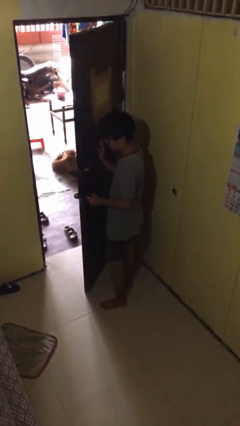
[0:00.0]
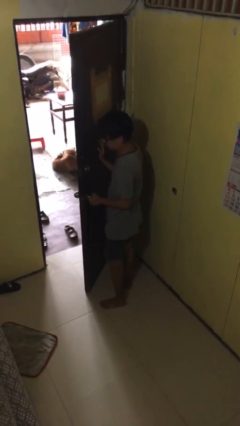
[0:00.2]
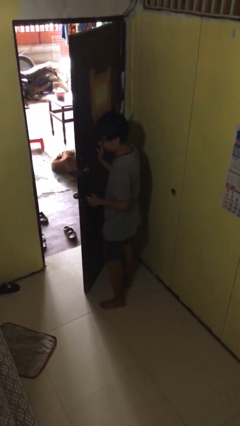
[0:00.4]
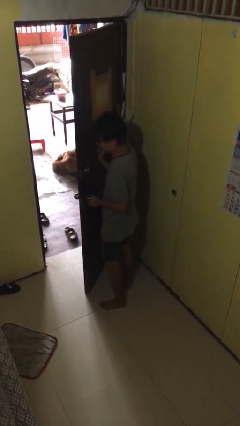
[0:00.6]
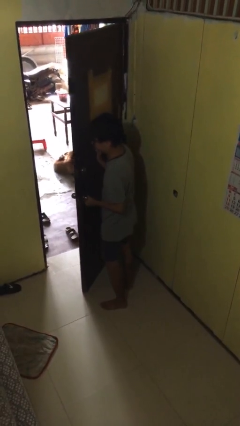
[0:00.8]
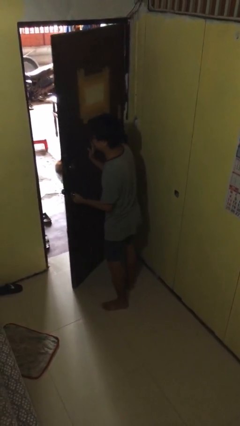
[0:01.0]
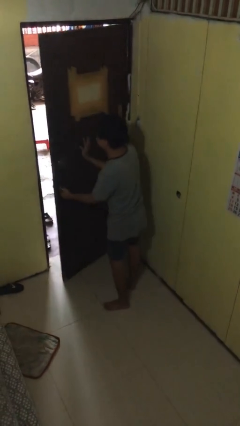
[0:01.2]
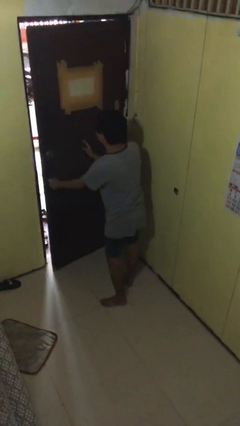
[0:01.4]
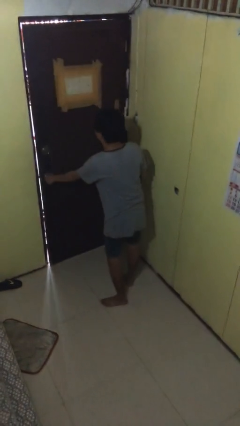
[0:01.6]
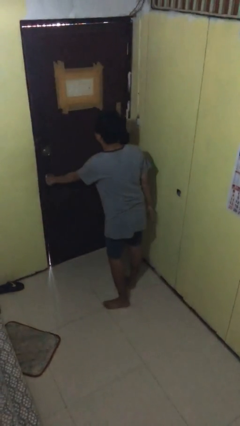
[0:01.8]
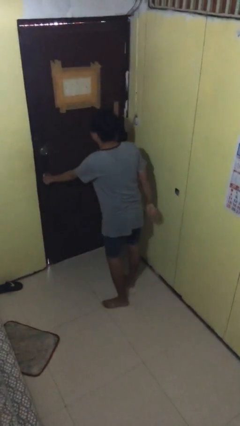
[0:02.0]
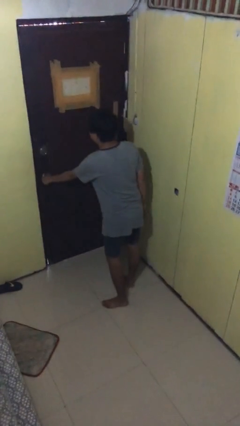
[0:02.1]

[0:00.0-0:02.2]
person closes facility door

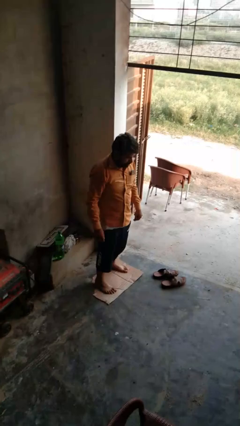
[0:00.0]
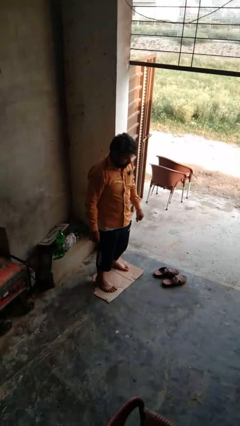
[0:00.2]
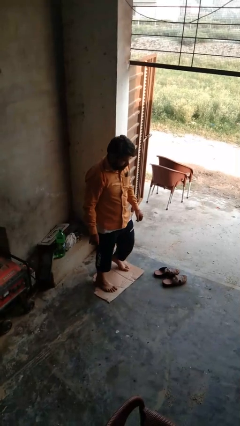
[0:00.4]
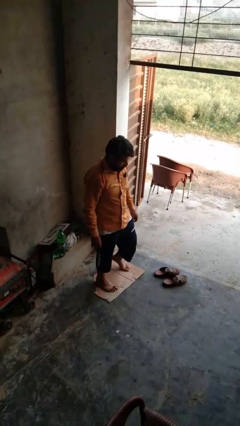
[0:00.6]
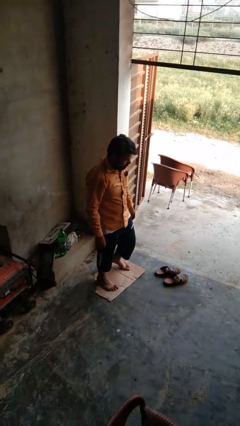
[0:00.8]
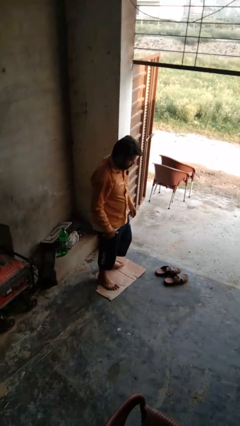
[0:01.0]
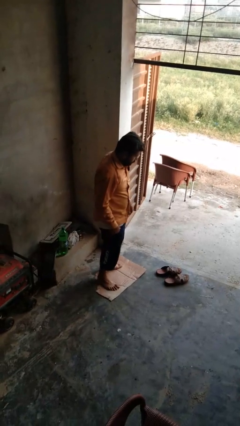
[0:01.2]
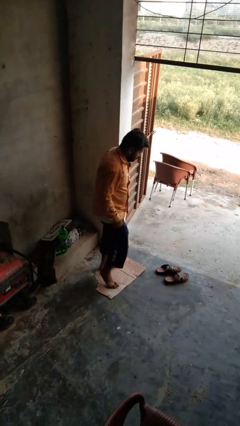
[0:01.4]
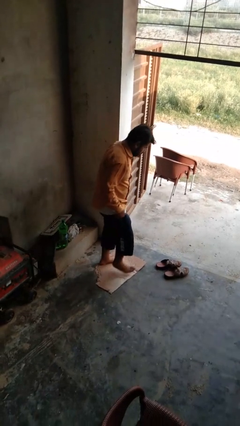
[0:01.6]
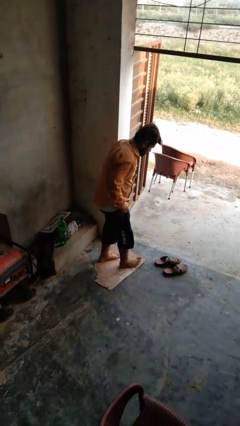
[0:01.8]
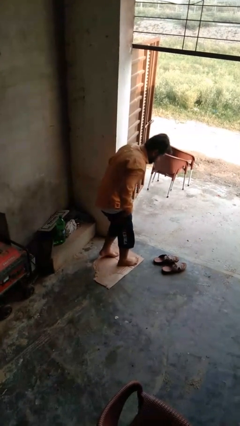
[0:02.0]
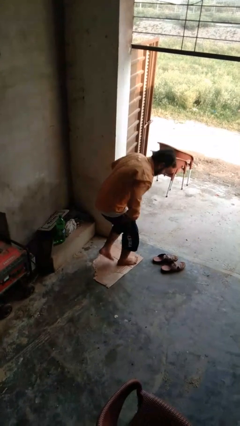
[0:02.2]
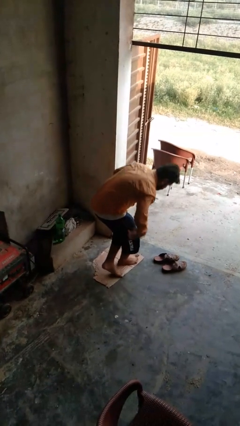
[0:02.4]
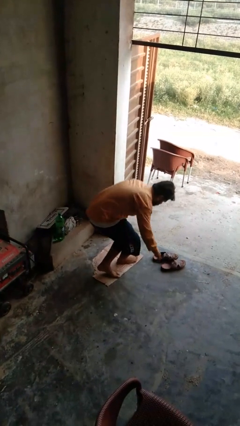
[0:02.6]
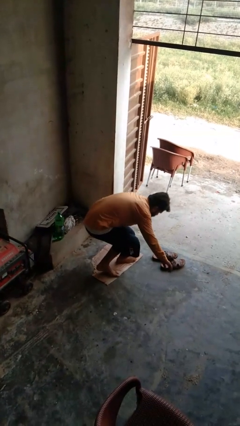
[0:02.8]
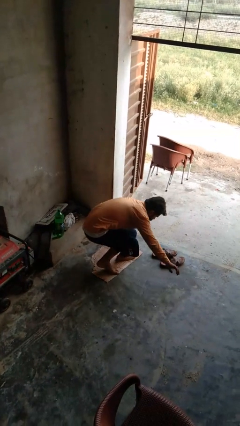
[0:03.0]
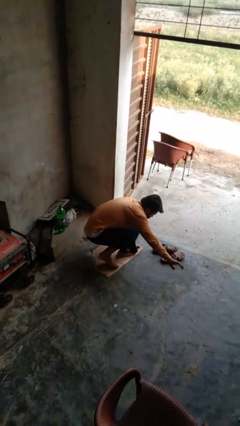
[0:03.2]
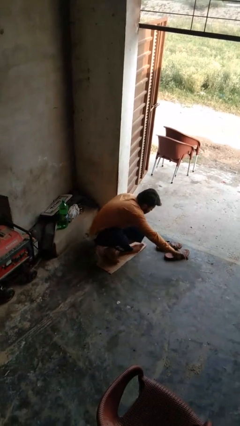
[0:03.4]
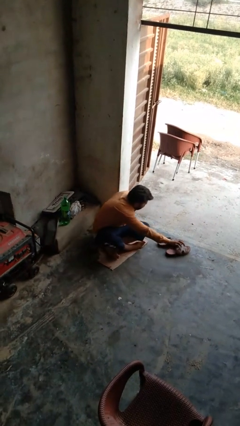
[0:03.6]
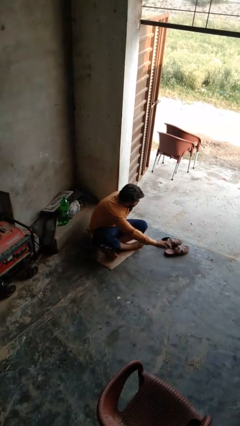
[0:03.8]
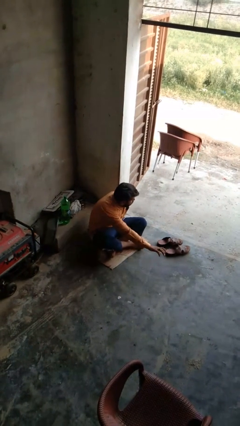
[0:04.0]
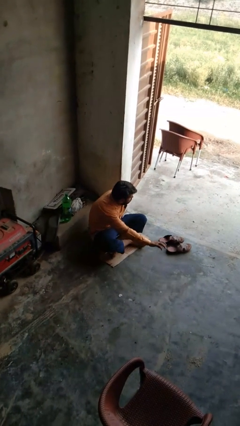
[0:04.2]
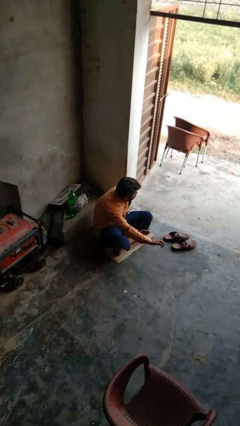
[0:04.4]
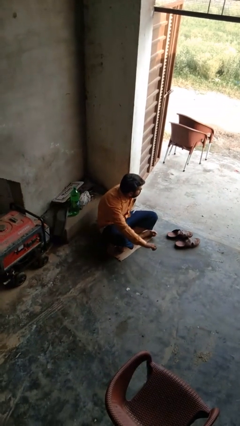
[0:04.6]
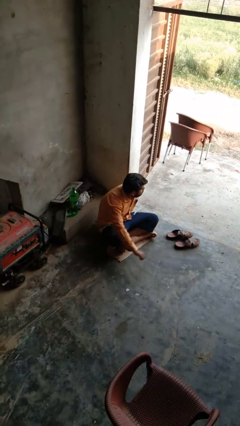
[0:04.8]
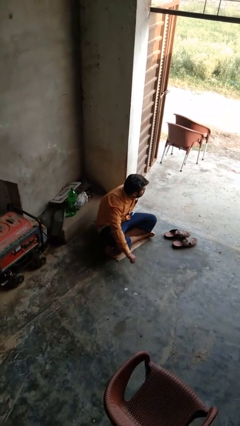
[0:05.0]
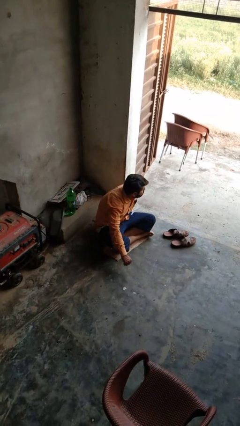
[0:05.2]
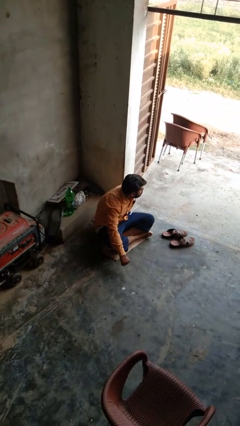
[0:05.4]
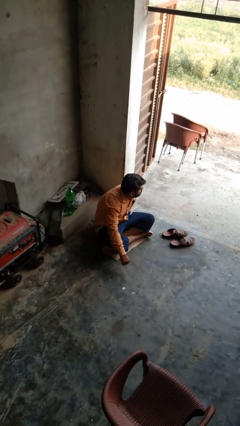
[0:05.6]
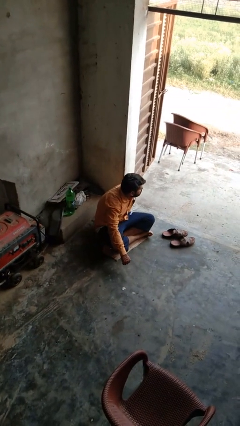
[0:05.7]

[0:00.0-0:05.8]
person sits crisscross

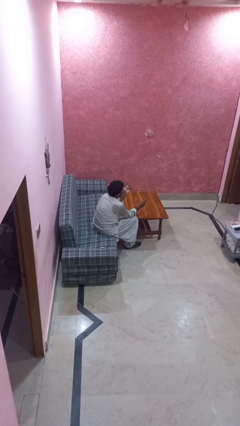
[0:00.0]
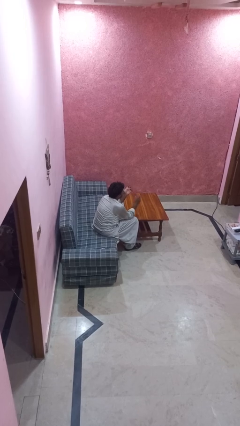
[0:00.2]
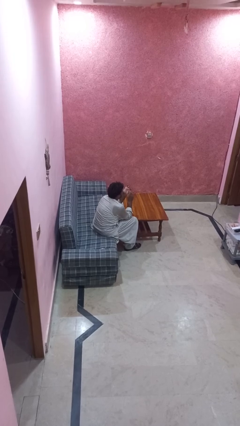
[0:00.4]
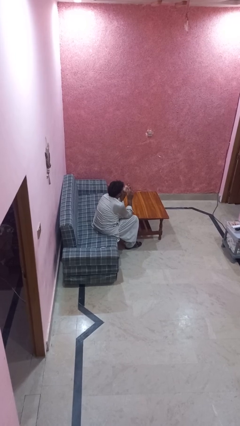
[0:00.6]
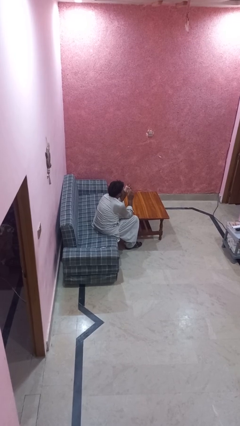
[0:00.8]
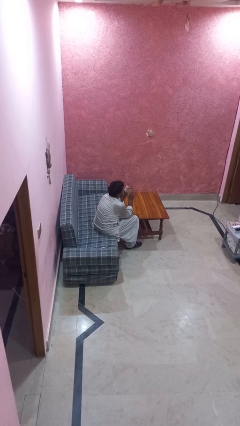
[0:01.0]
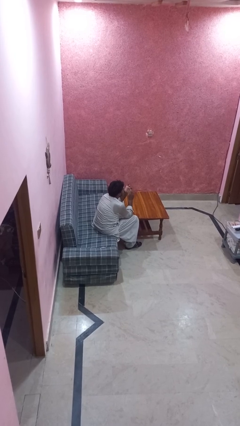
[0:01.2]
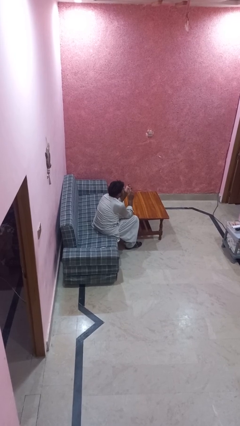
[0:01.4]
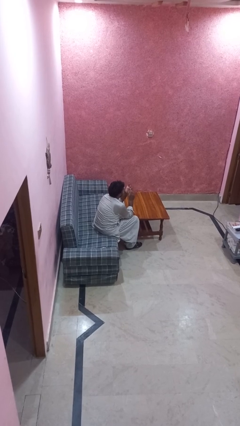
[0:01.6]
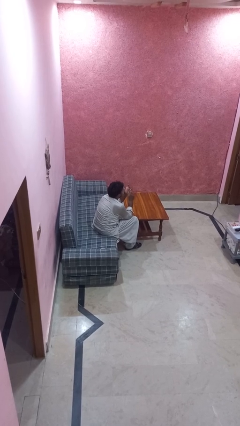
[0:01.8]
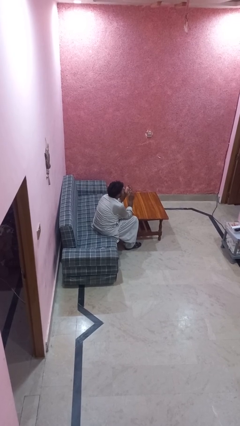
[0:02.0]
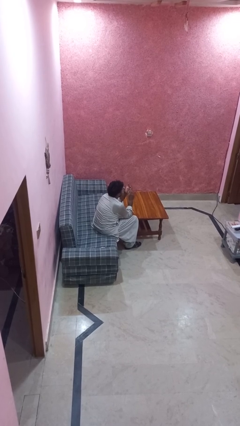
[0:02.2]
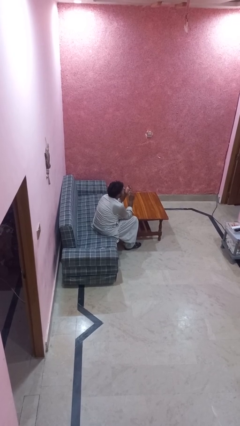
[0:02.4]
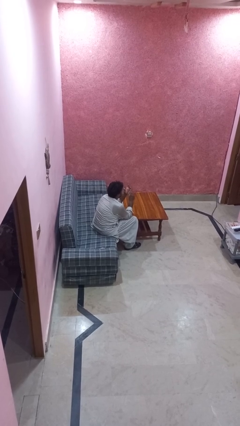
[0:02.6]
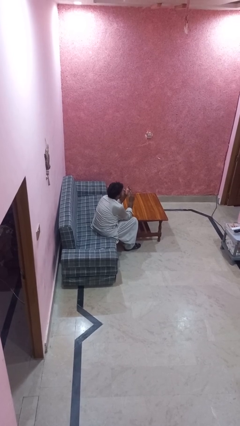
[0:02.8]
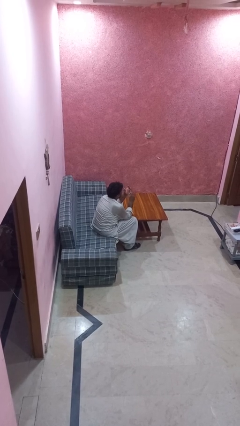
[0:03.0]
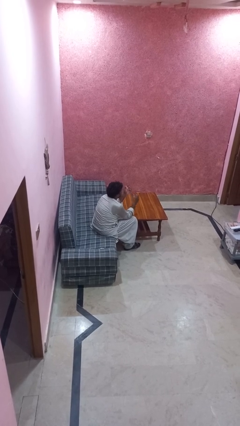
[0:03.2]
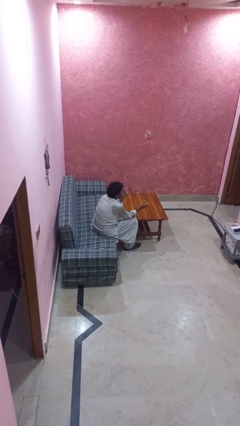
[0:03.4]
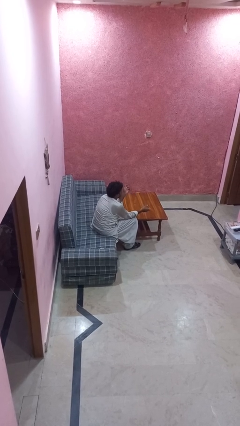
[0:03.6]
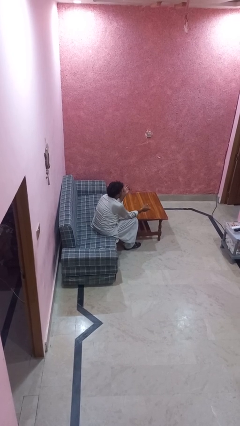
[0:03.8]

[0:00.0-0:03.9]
person clips fingernails

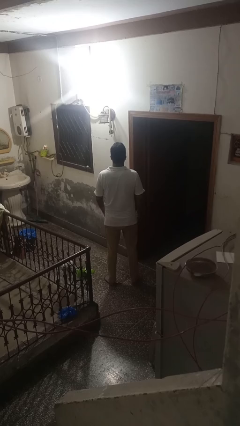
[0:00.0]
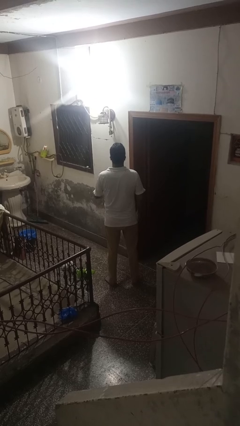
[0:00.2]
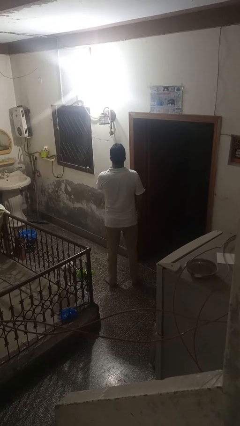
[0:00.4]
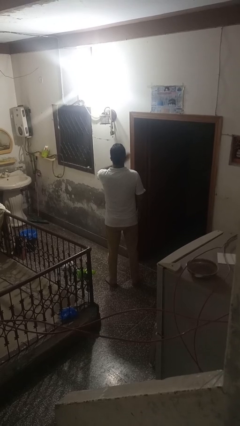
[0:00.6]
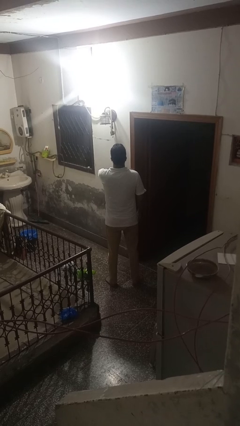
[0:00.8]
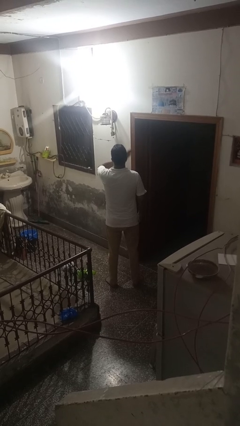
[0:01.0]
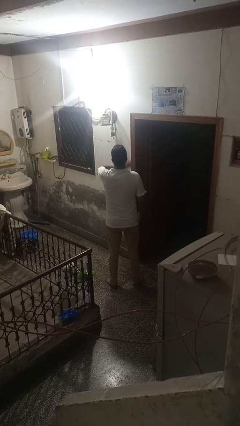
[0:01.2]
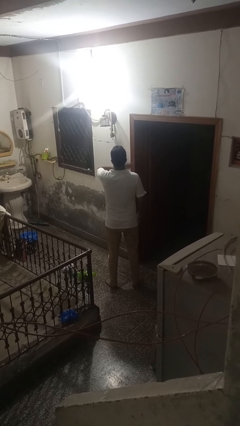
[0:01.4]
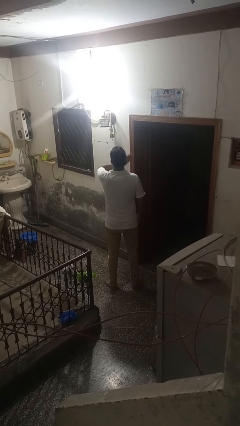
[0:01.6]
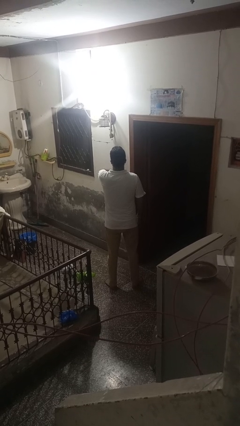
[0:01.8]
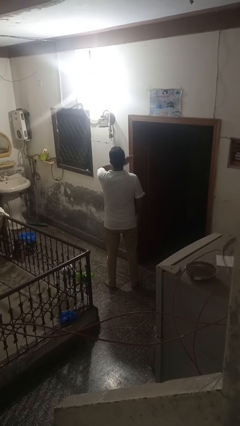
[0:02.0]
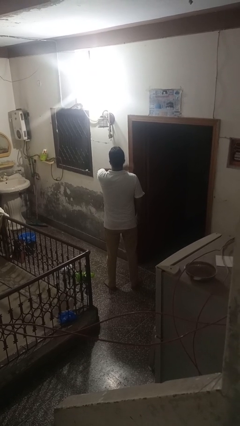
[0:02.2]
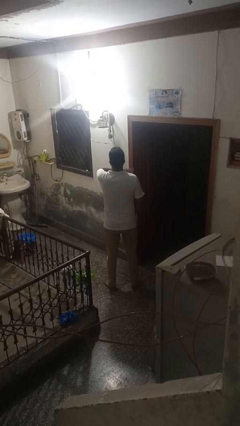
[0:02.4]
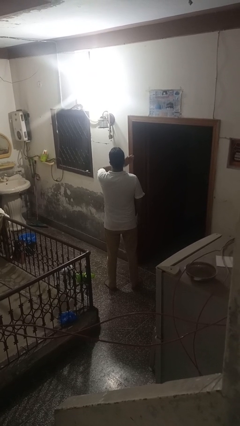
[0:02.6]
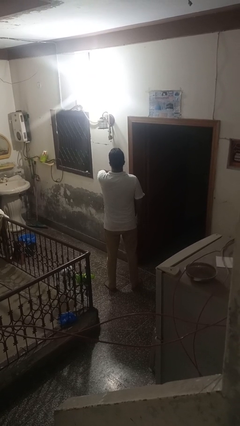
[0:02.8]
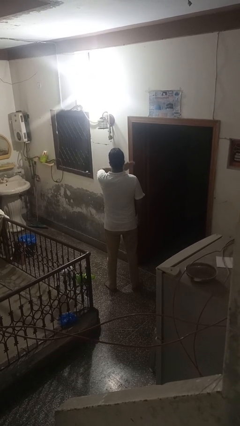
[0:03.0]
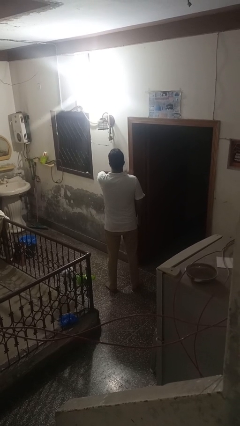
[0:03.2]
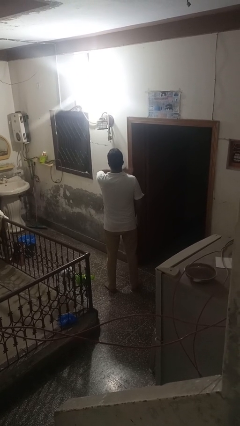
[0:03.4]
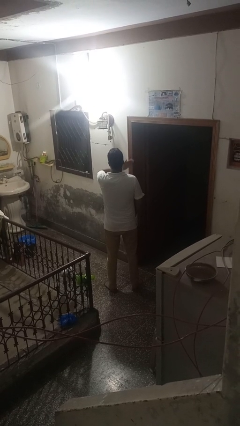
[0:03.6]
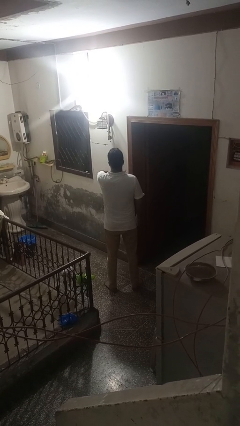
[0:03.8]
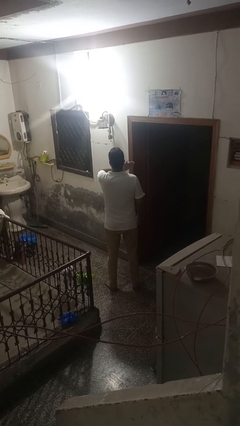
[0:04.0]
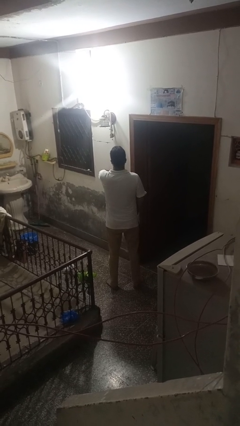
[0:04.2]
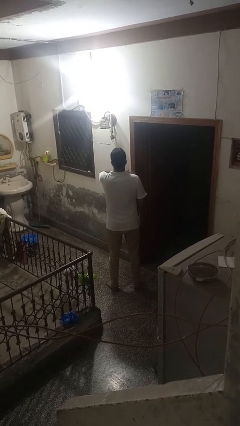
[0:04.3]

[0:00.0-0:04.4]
person drums on chest

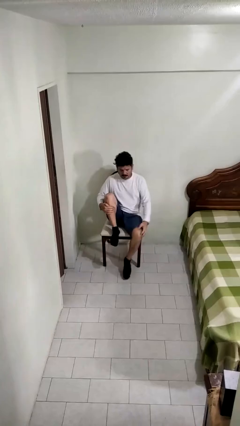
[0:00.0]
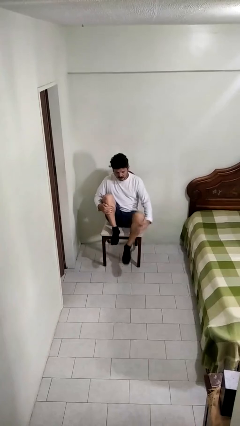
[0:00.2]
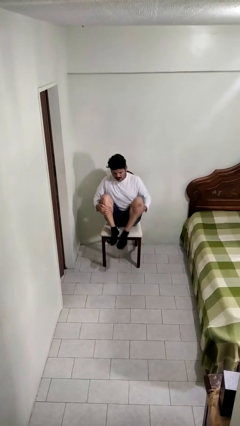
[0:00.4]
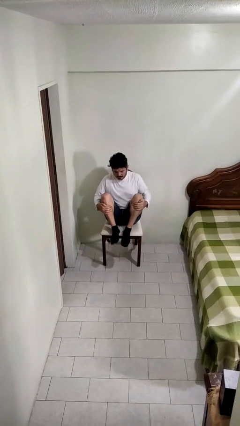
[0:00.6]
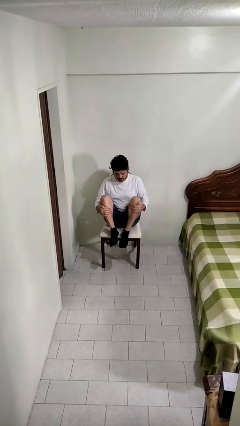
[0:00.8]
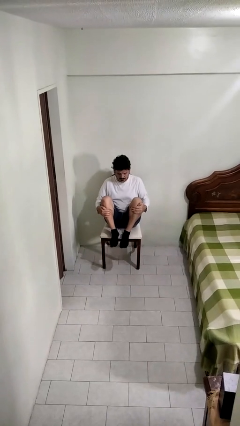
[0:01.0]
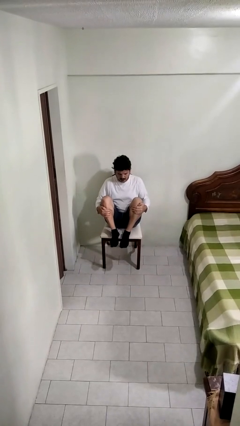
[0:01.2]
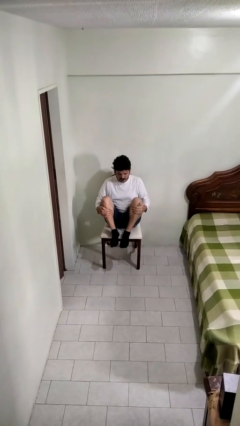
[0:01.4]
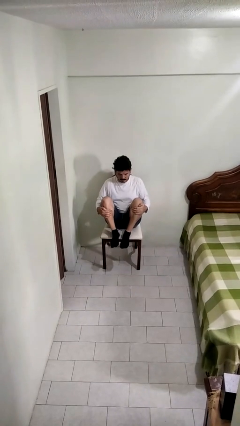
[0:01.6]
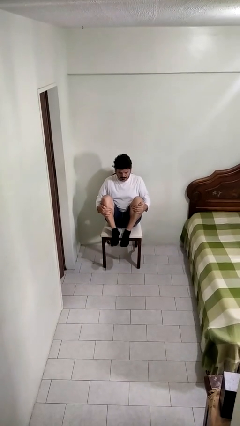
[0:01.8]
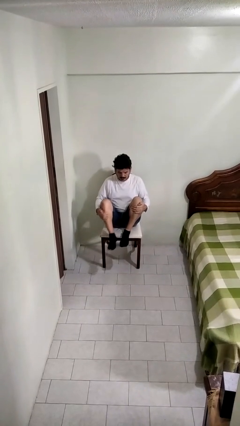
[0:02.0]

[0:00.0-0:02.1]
person puts feet up
